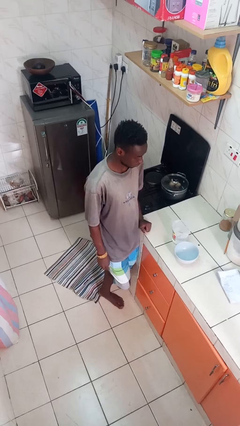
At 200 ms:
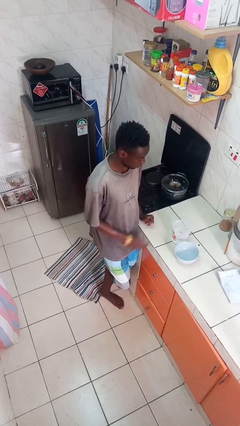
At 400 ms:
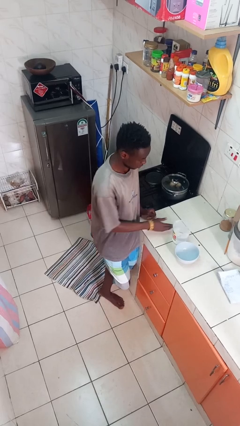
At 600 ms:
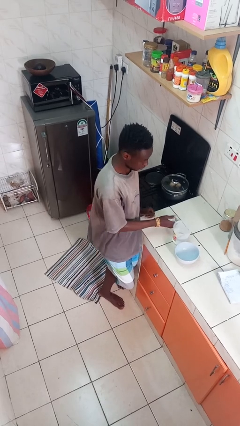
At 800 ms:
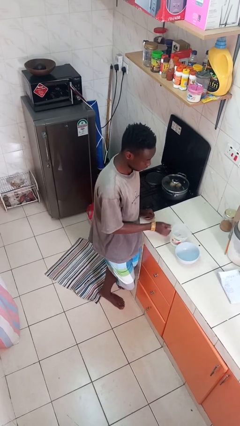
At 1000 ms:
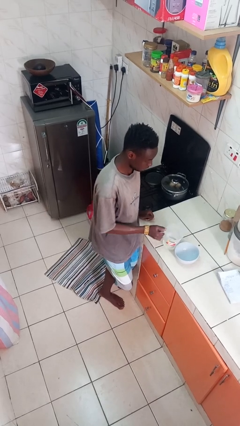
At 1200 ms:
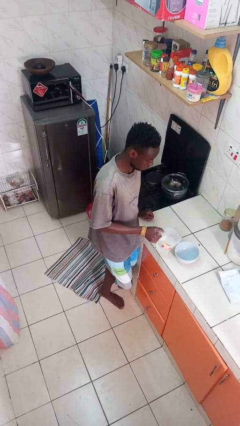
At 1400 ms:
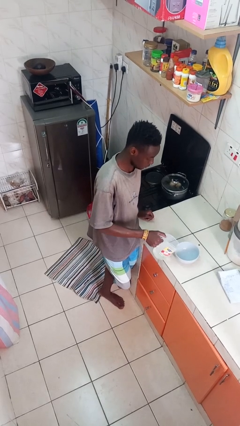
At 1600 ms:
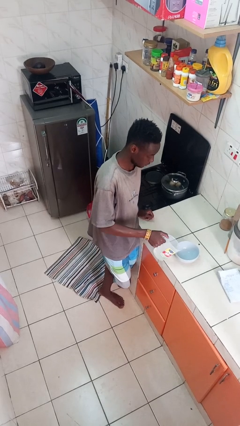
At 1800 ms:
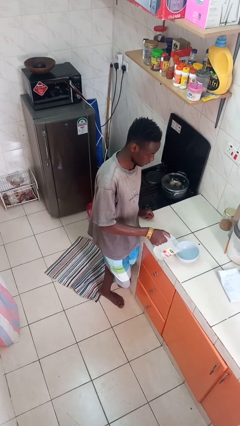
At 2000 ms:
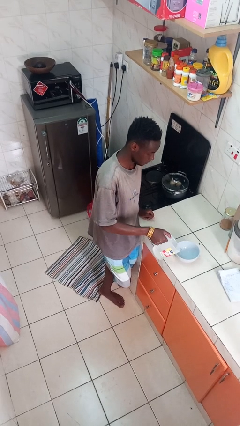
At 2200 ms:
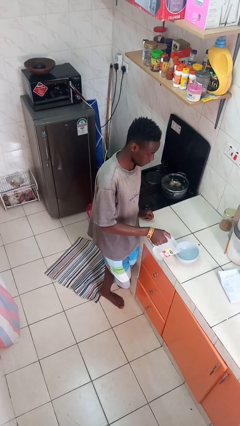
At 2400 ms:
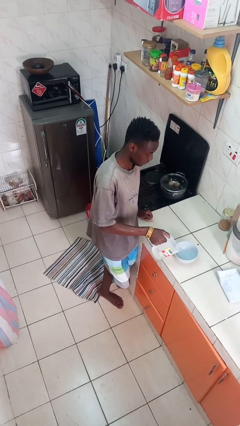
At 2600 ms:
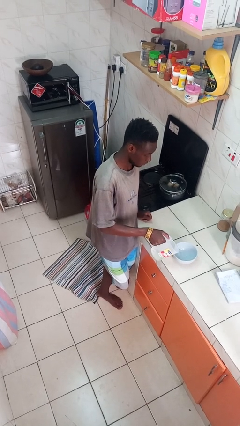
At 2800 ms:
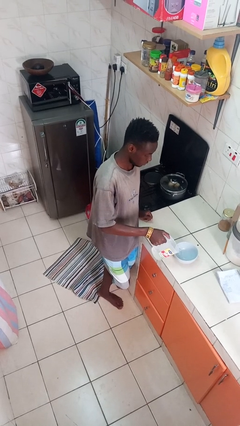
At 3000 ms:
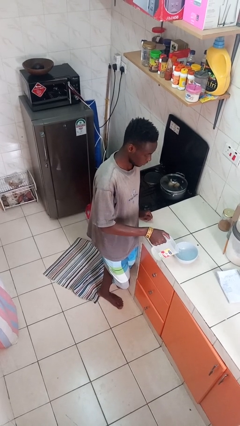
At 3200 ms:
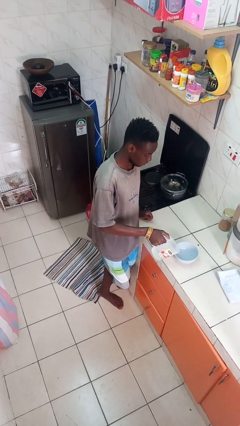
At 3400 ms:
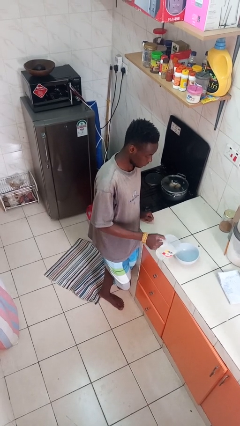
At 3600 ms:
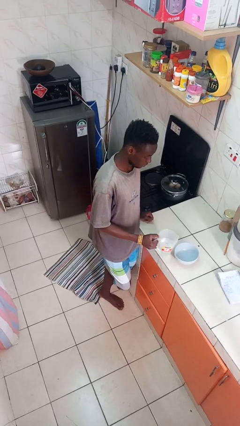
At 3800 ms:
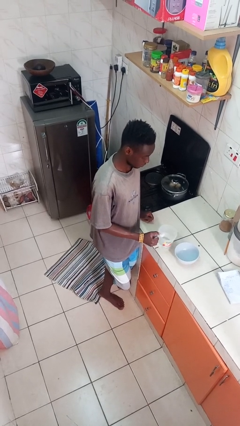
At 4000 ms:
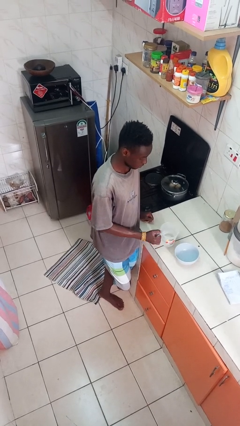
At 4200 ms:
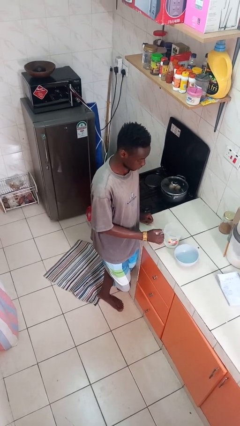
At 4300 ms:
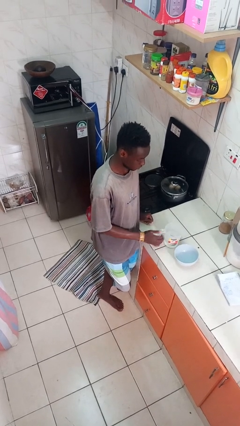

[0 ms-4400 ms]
person pours into bowl

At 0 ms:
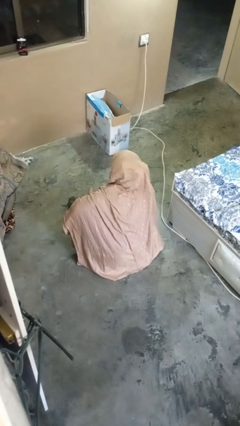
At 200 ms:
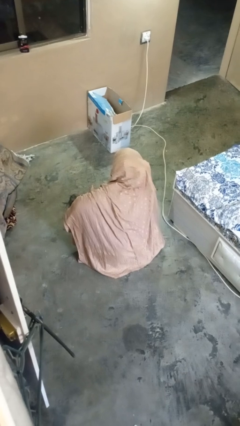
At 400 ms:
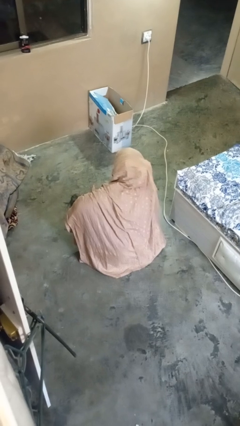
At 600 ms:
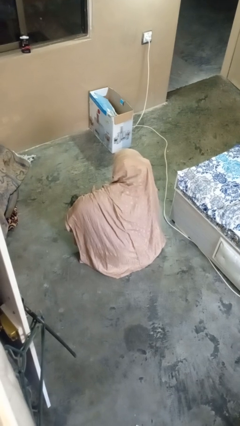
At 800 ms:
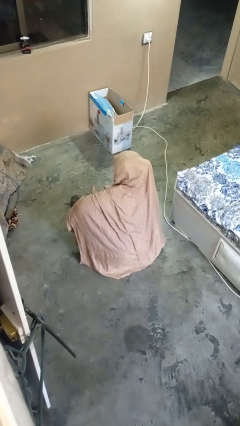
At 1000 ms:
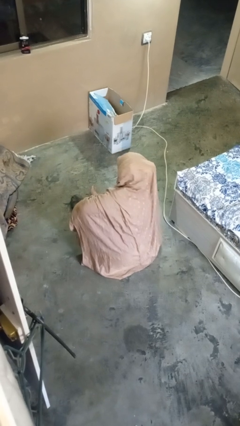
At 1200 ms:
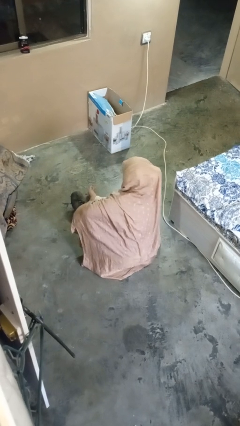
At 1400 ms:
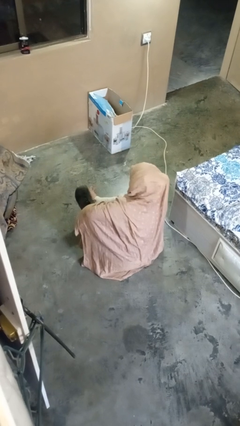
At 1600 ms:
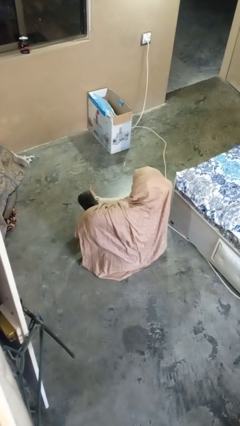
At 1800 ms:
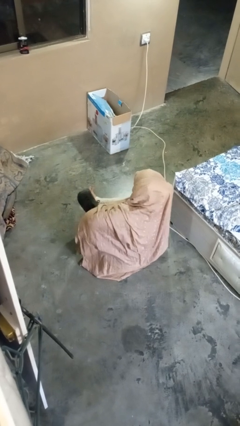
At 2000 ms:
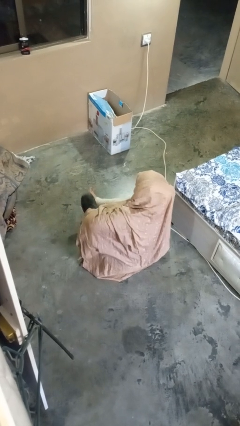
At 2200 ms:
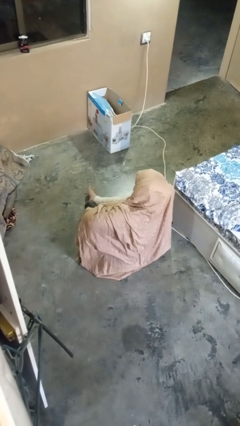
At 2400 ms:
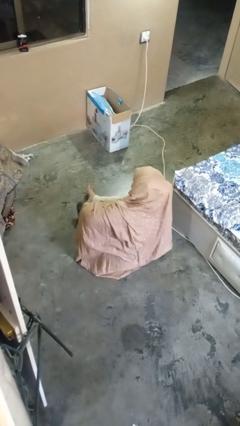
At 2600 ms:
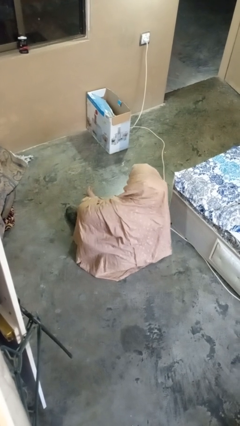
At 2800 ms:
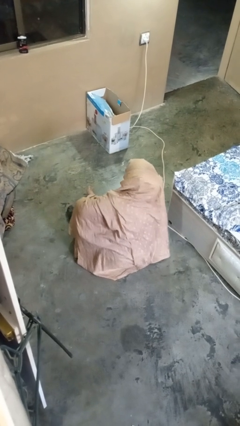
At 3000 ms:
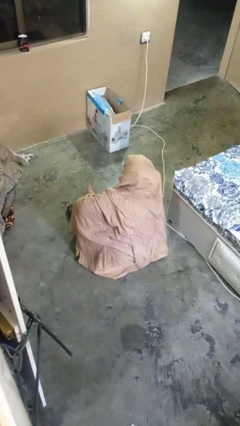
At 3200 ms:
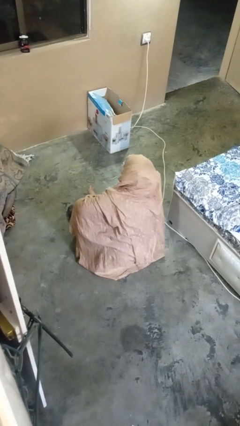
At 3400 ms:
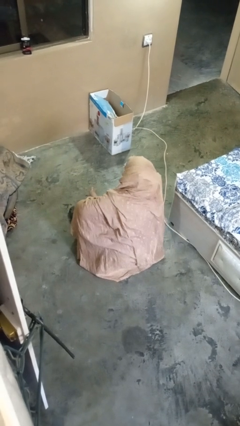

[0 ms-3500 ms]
person puts on shoes

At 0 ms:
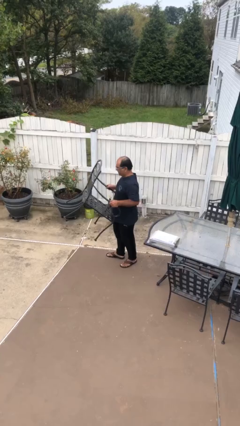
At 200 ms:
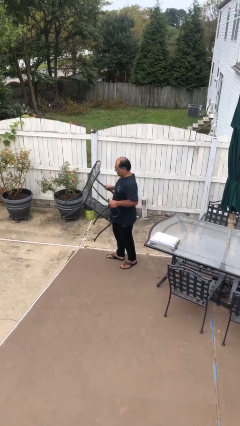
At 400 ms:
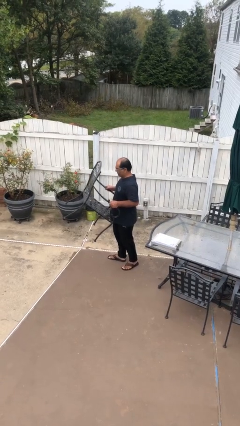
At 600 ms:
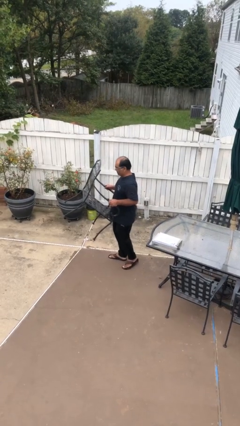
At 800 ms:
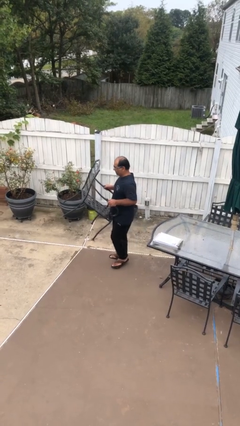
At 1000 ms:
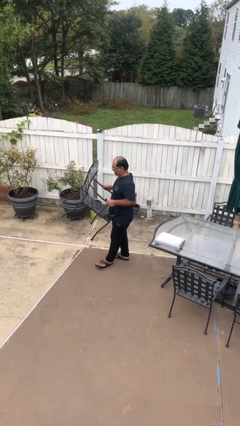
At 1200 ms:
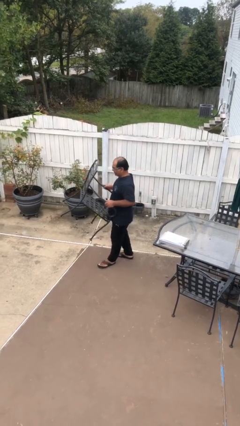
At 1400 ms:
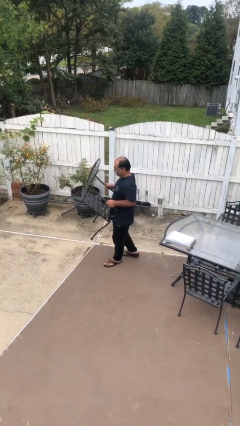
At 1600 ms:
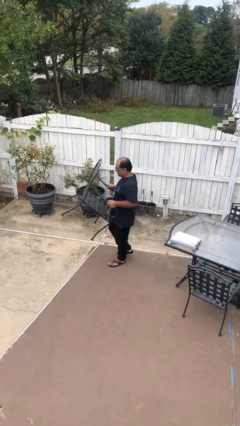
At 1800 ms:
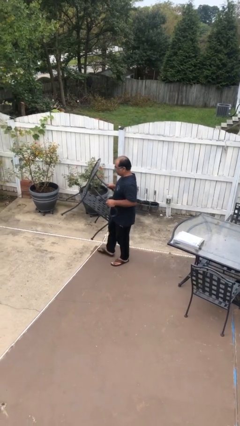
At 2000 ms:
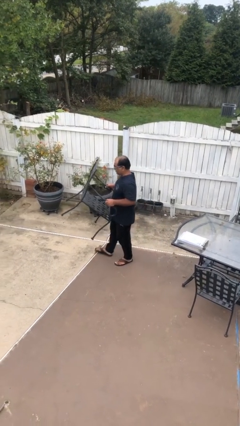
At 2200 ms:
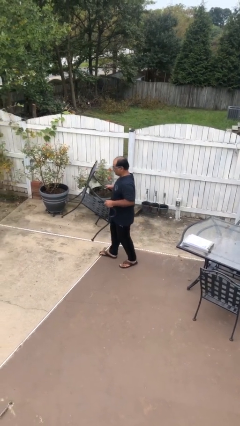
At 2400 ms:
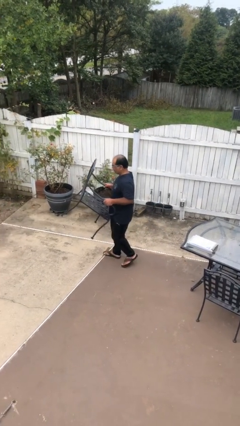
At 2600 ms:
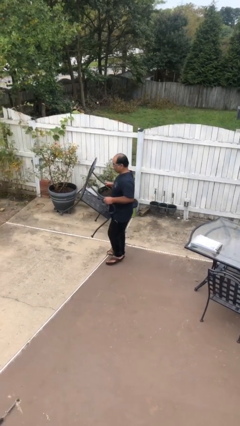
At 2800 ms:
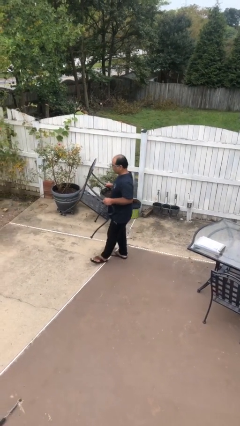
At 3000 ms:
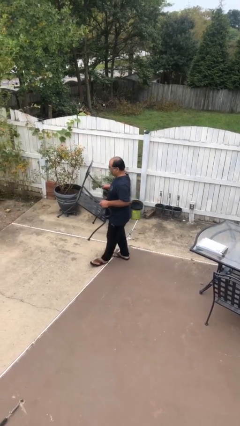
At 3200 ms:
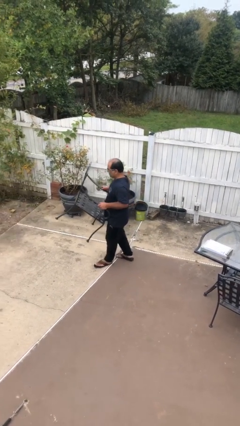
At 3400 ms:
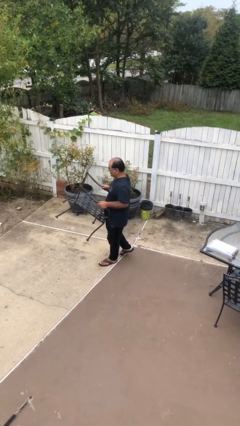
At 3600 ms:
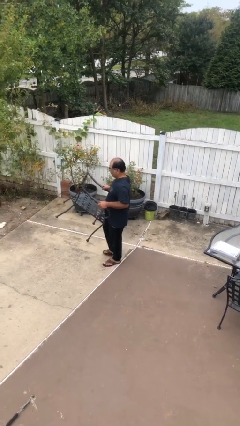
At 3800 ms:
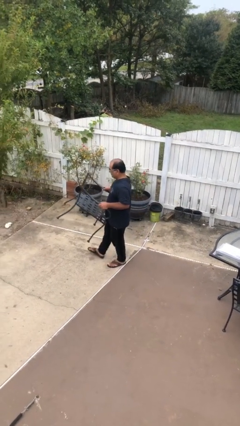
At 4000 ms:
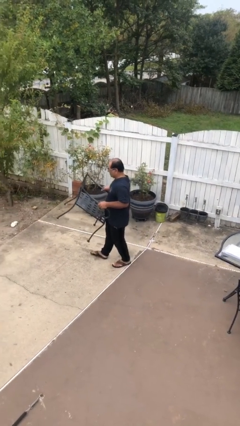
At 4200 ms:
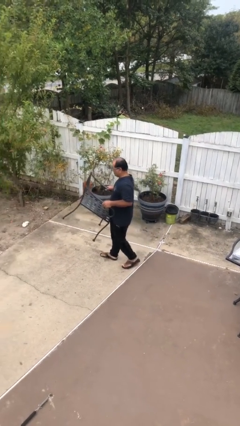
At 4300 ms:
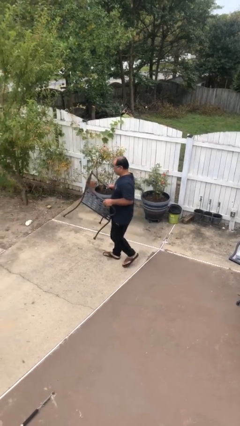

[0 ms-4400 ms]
person carries heavy object

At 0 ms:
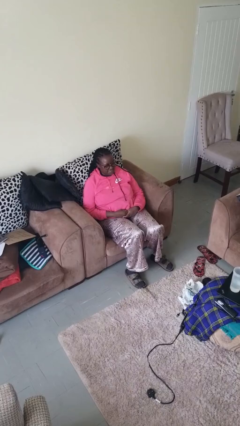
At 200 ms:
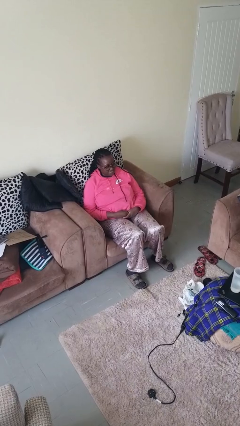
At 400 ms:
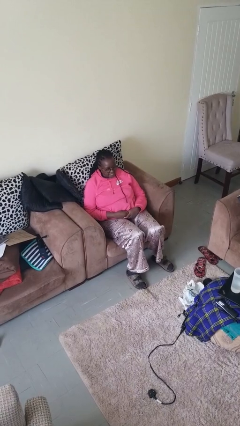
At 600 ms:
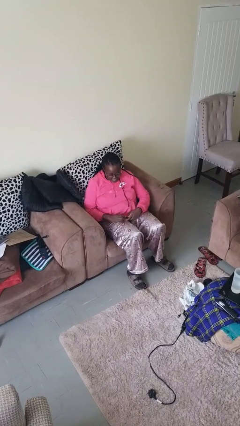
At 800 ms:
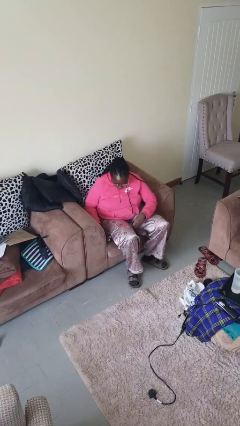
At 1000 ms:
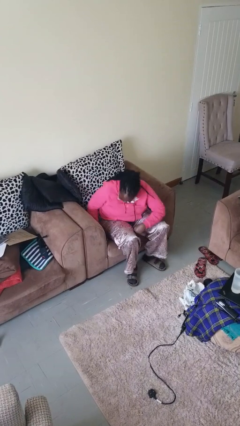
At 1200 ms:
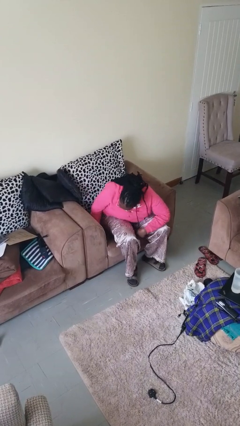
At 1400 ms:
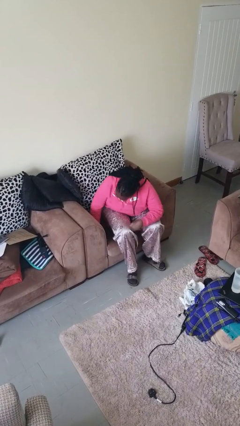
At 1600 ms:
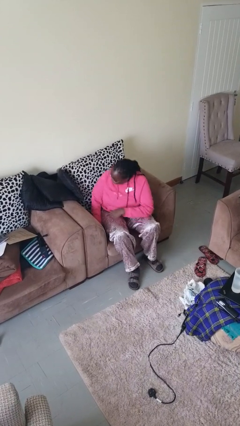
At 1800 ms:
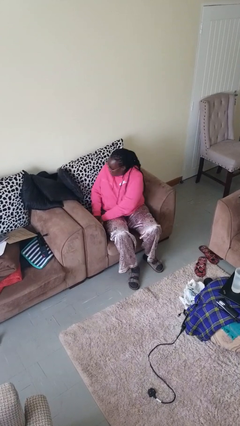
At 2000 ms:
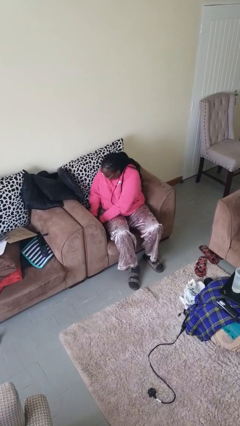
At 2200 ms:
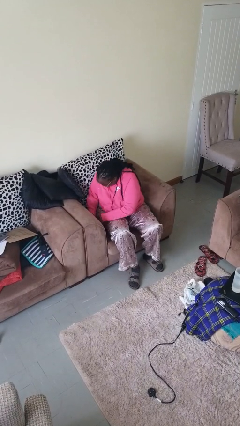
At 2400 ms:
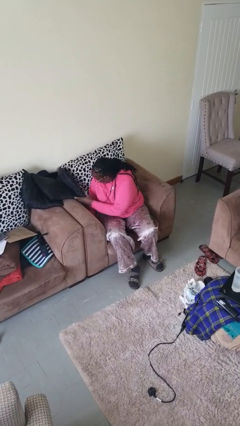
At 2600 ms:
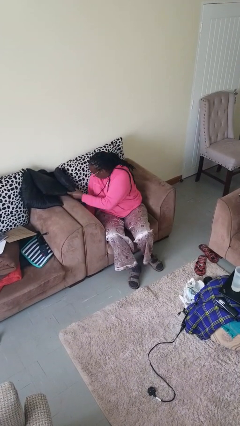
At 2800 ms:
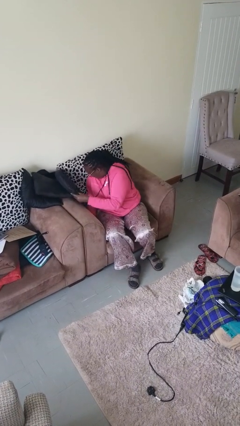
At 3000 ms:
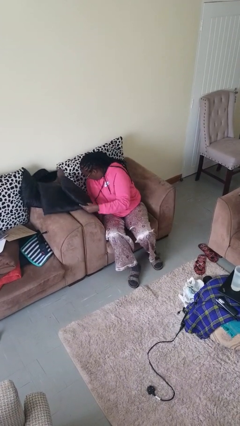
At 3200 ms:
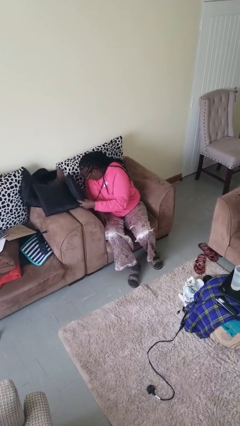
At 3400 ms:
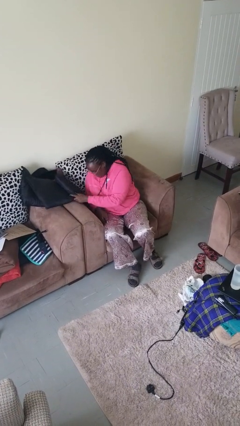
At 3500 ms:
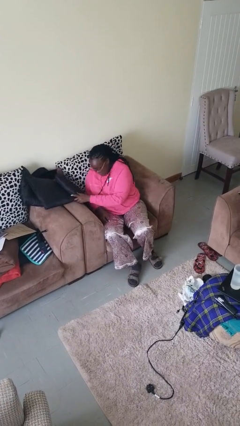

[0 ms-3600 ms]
person searches in couch

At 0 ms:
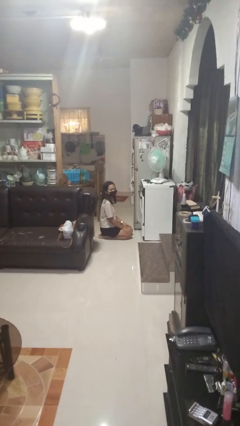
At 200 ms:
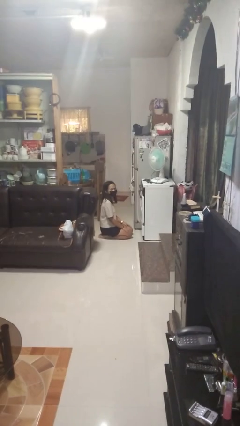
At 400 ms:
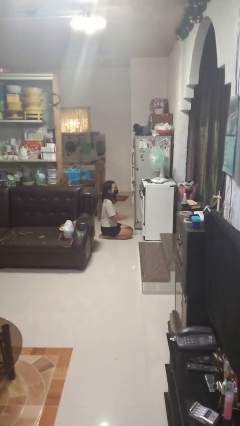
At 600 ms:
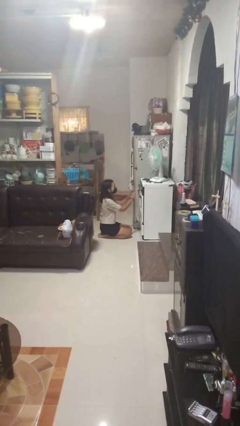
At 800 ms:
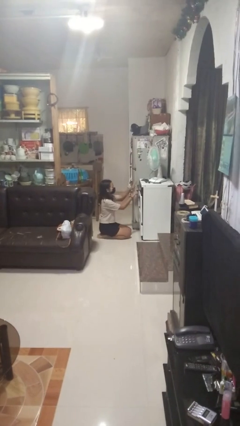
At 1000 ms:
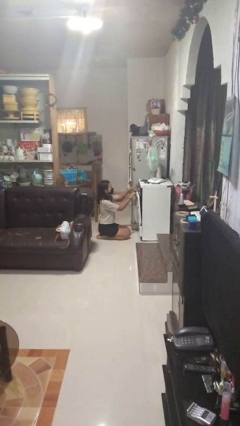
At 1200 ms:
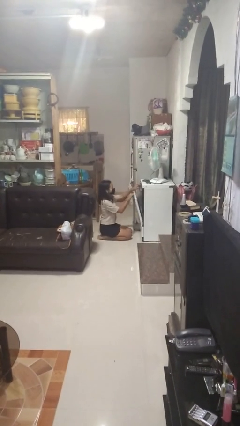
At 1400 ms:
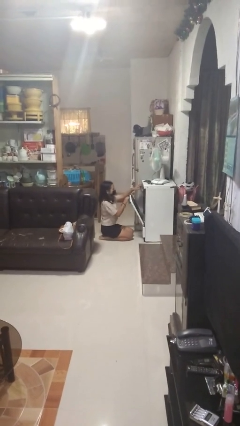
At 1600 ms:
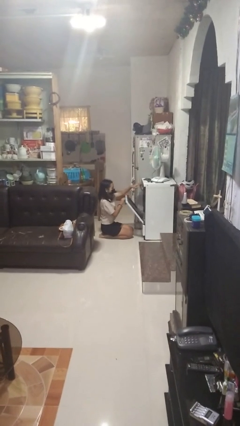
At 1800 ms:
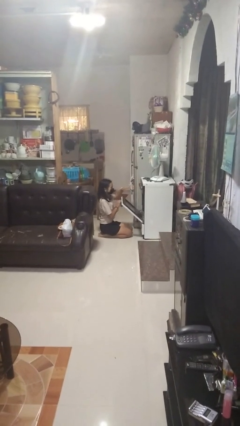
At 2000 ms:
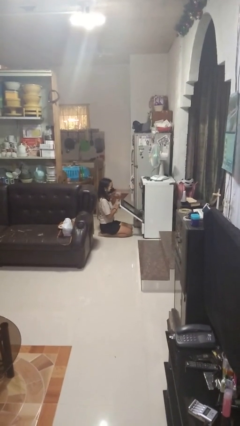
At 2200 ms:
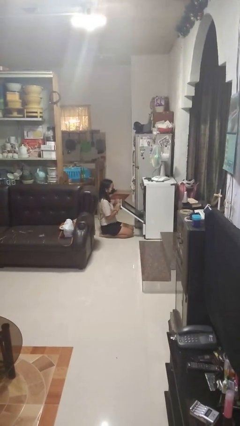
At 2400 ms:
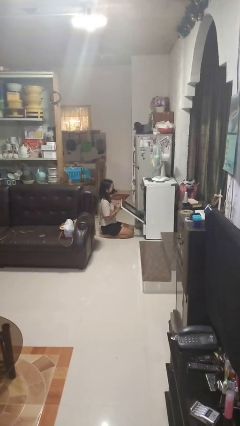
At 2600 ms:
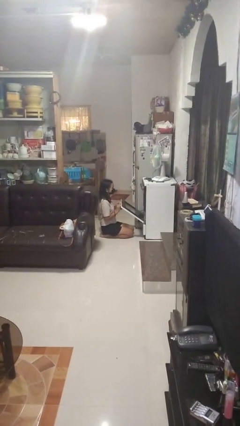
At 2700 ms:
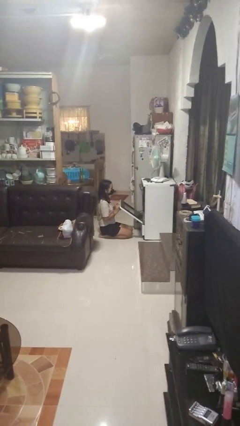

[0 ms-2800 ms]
person opens oven door
